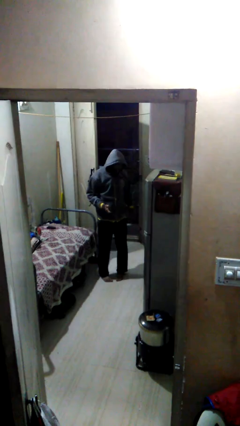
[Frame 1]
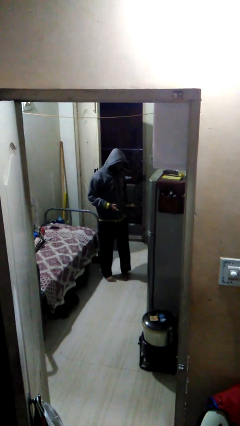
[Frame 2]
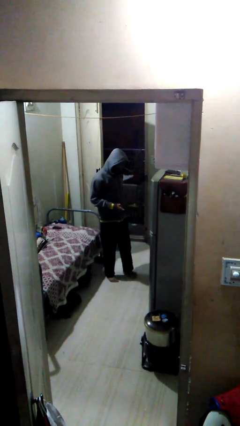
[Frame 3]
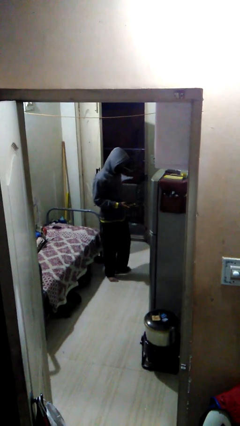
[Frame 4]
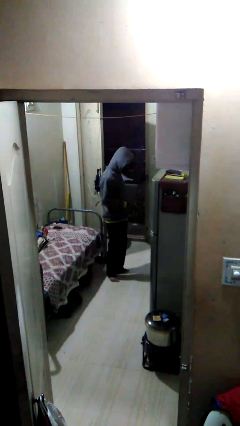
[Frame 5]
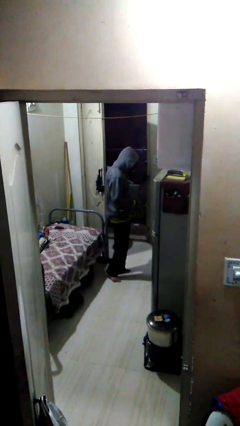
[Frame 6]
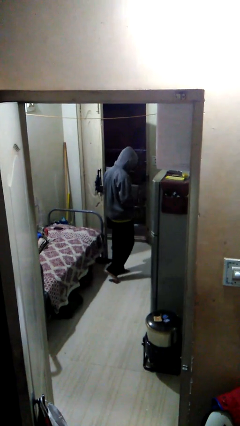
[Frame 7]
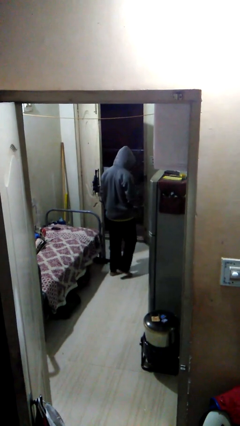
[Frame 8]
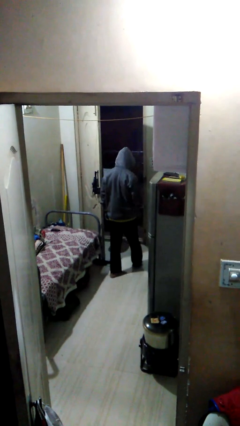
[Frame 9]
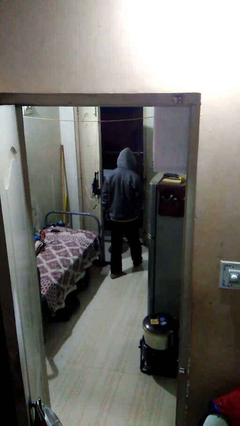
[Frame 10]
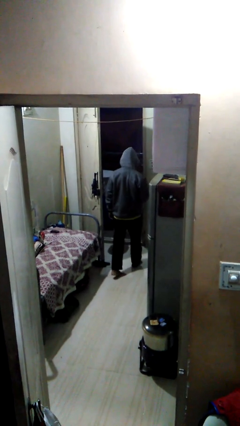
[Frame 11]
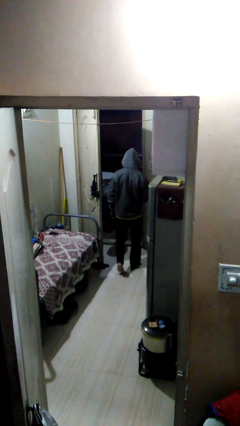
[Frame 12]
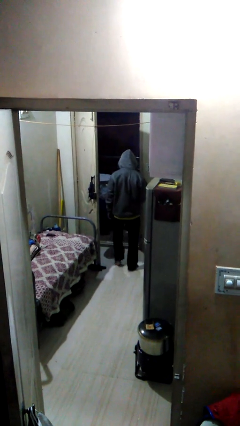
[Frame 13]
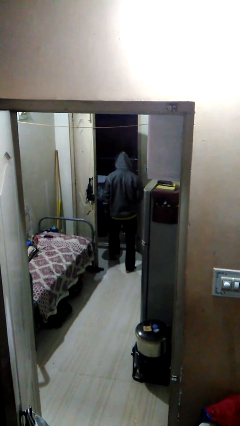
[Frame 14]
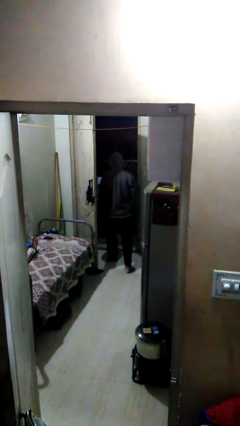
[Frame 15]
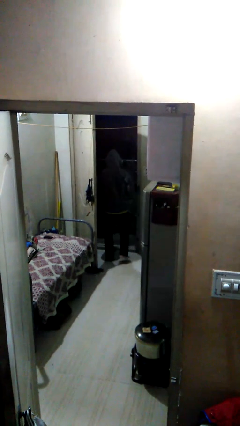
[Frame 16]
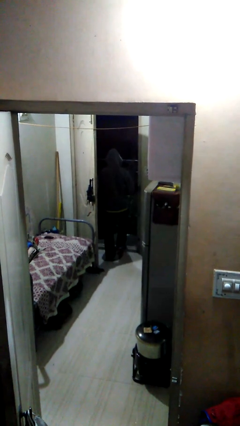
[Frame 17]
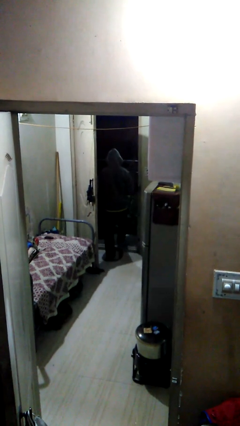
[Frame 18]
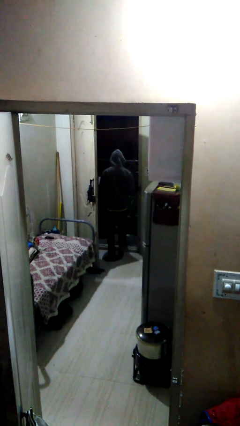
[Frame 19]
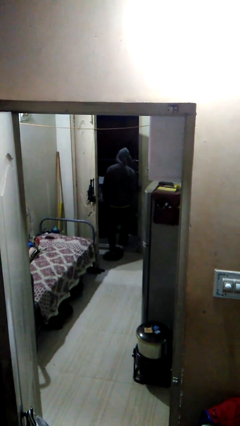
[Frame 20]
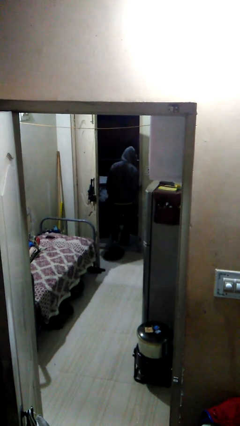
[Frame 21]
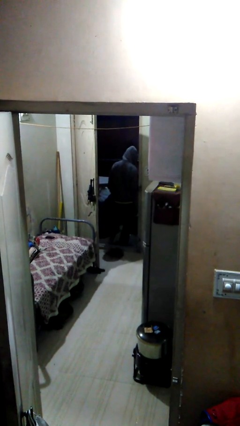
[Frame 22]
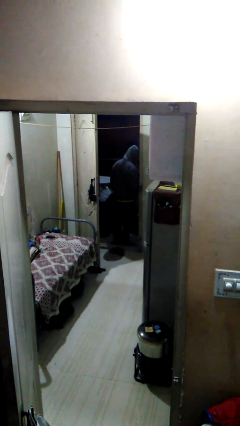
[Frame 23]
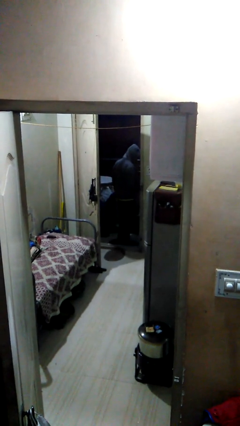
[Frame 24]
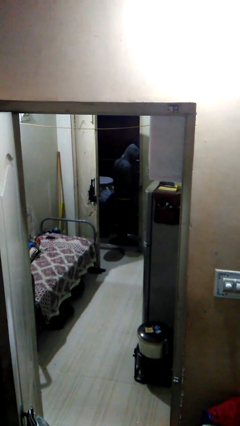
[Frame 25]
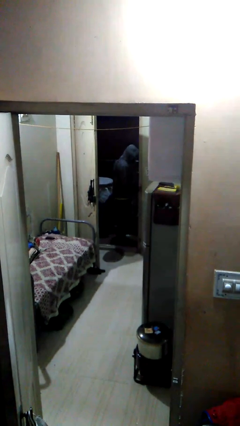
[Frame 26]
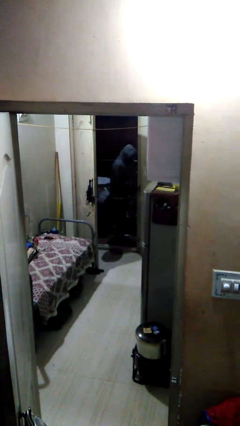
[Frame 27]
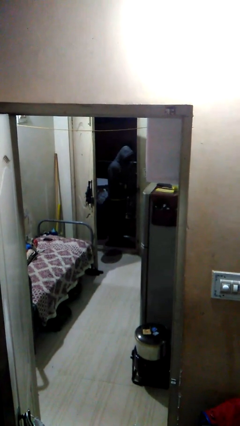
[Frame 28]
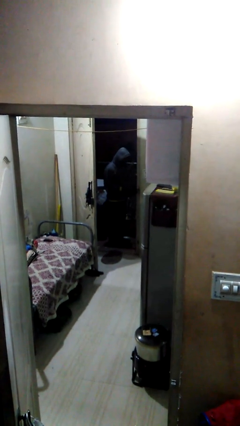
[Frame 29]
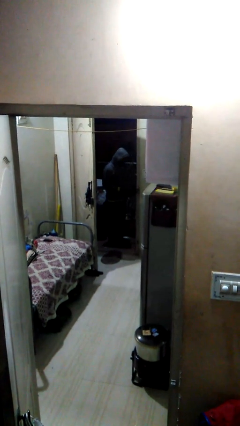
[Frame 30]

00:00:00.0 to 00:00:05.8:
person exits scene through structure

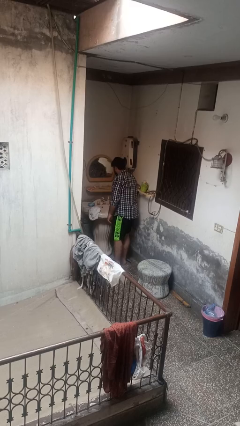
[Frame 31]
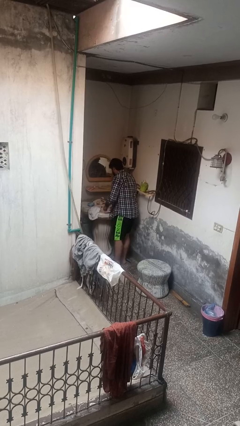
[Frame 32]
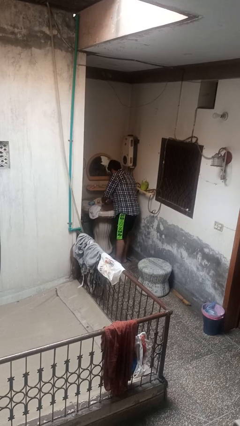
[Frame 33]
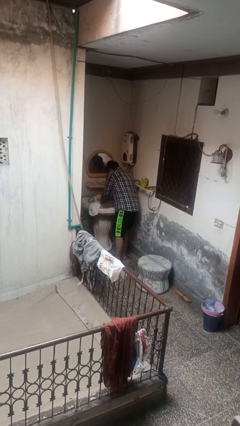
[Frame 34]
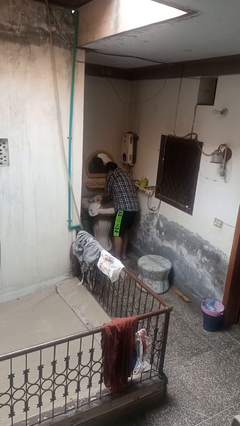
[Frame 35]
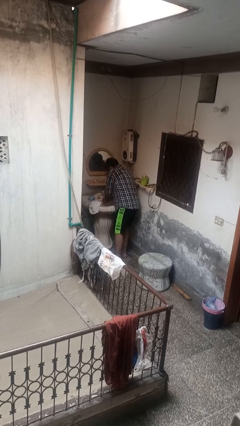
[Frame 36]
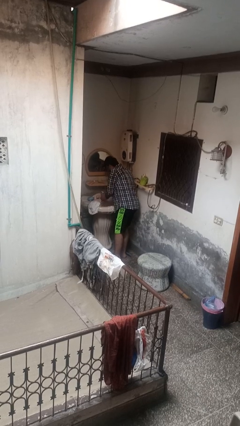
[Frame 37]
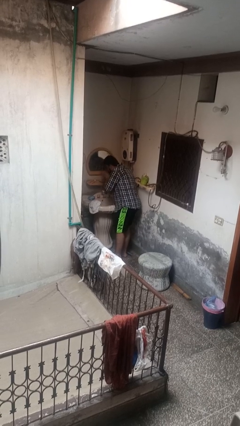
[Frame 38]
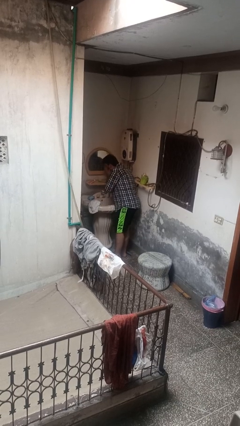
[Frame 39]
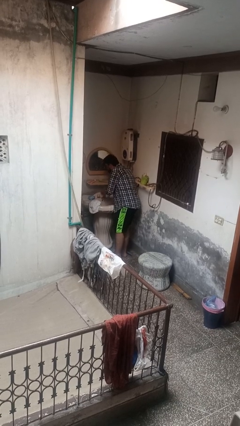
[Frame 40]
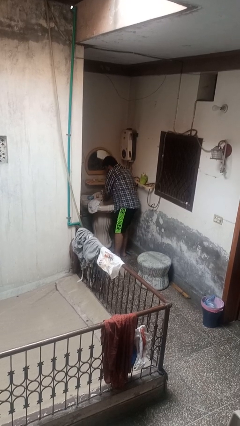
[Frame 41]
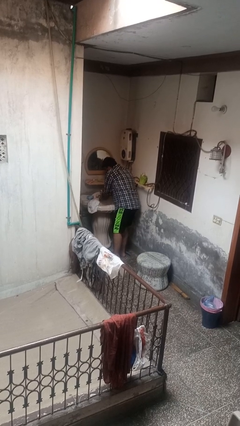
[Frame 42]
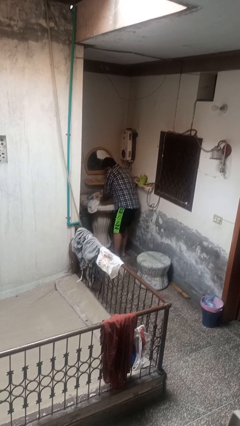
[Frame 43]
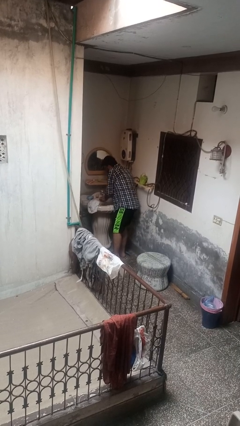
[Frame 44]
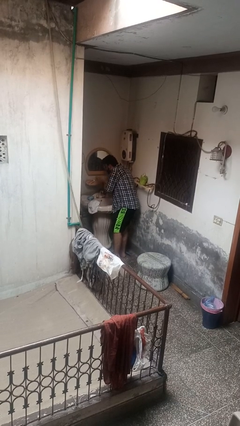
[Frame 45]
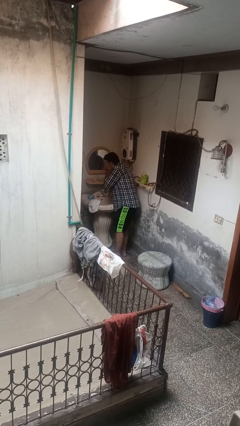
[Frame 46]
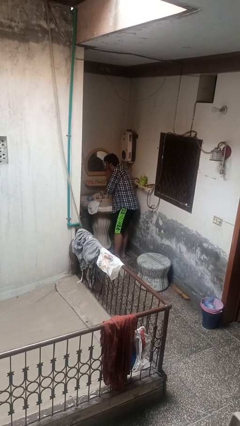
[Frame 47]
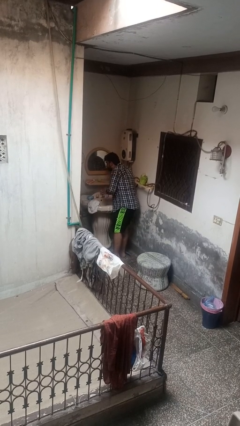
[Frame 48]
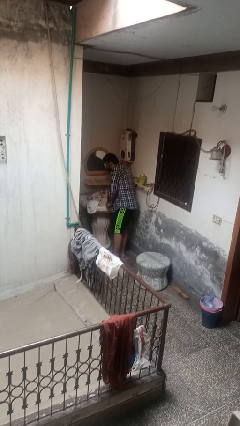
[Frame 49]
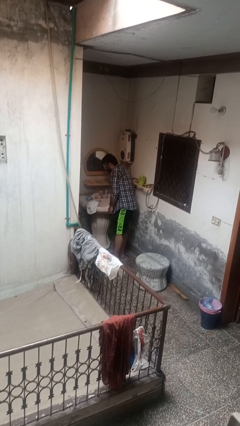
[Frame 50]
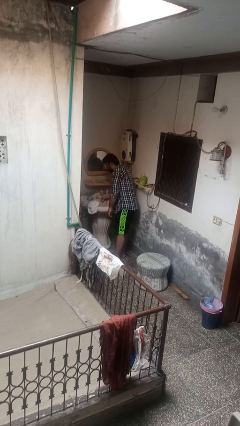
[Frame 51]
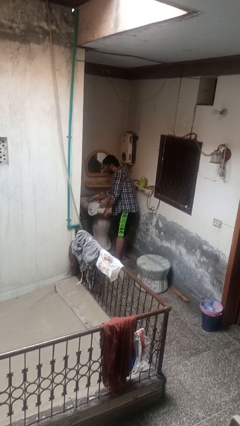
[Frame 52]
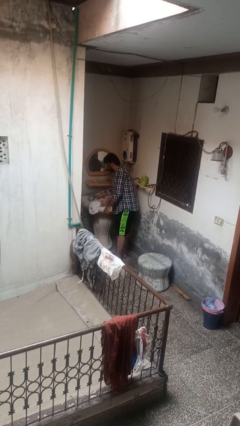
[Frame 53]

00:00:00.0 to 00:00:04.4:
person washes face

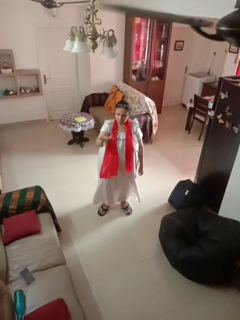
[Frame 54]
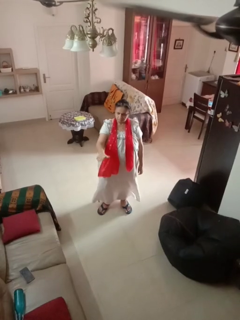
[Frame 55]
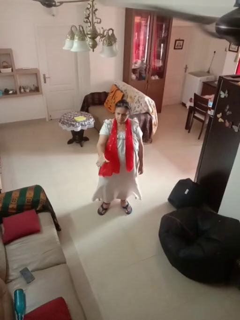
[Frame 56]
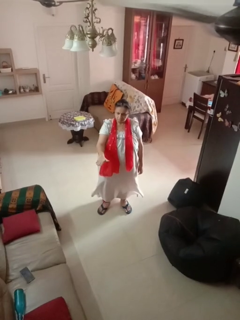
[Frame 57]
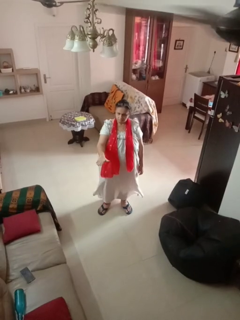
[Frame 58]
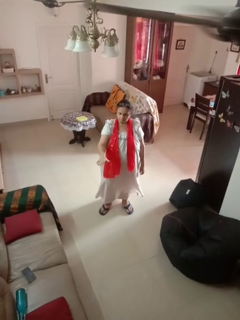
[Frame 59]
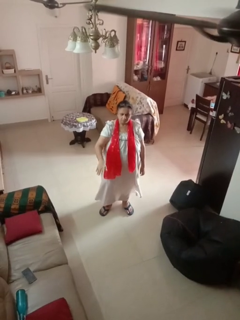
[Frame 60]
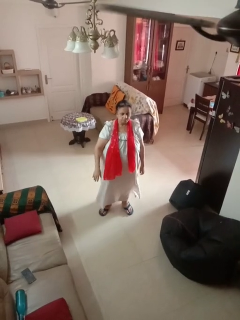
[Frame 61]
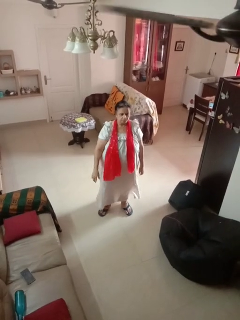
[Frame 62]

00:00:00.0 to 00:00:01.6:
person gestures swipe down

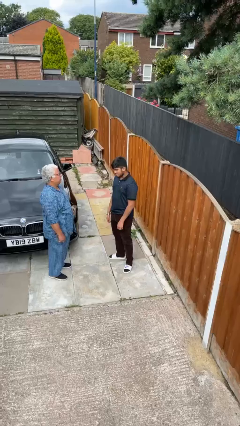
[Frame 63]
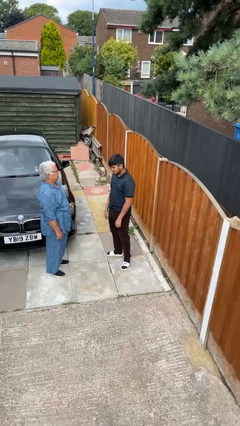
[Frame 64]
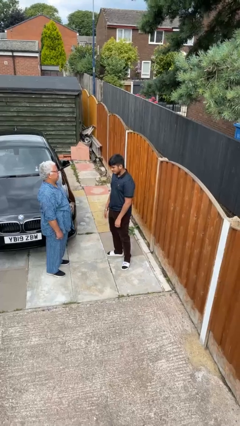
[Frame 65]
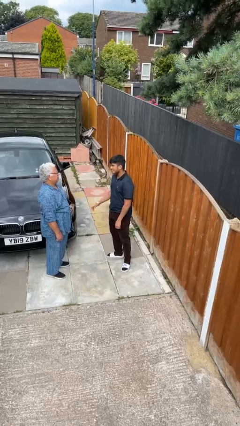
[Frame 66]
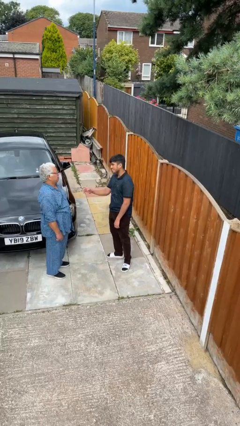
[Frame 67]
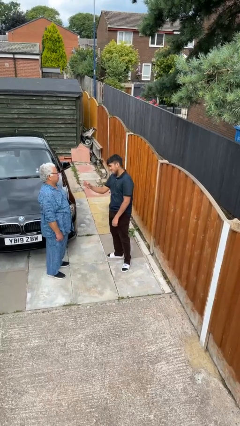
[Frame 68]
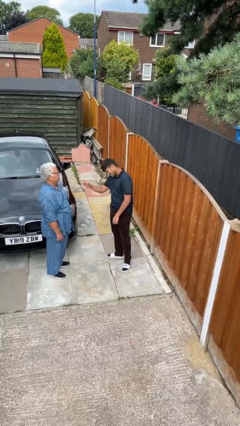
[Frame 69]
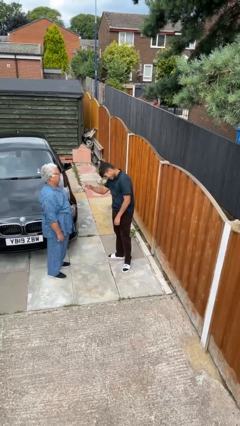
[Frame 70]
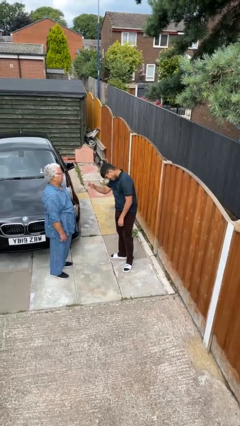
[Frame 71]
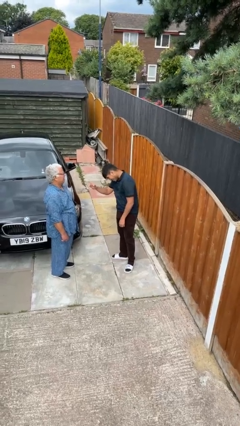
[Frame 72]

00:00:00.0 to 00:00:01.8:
person laughs with person

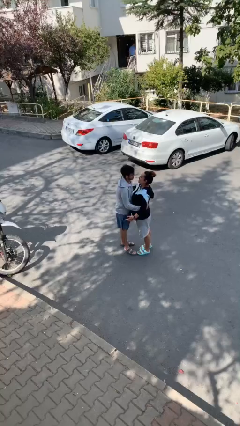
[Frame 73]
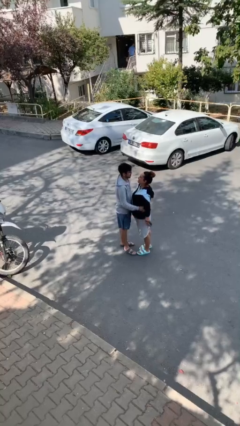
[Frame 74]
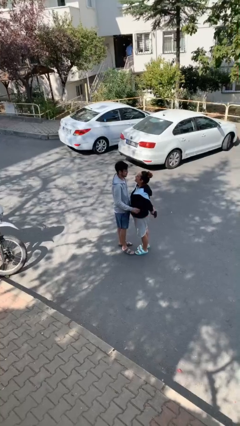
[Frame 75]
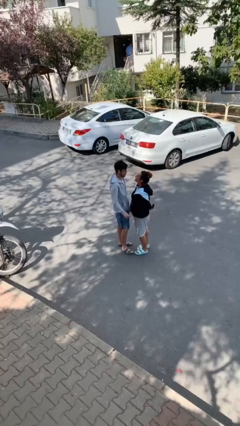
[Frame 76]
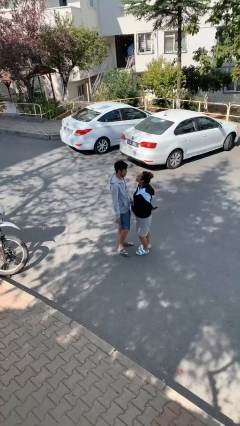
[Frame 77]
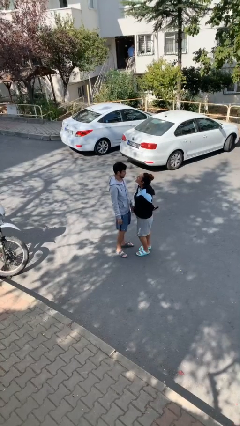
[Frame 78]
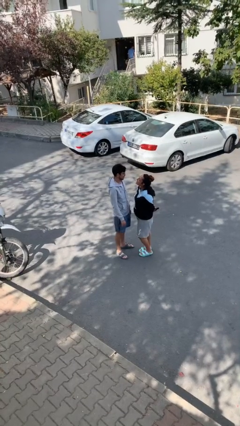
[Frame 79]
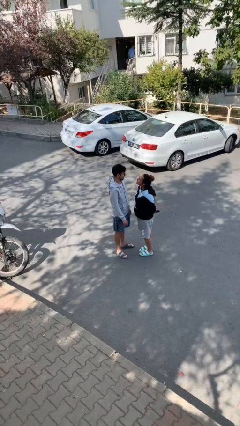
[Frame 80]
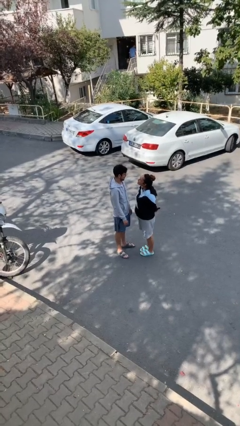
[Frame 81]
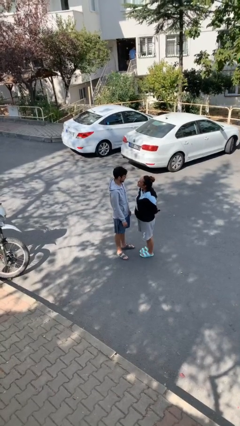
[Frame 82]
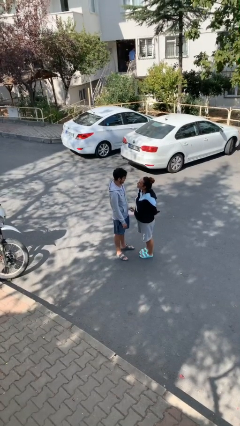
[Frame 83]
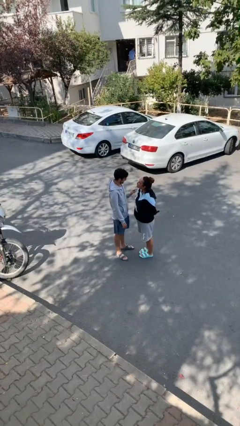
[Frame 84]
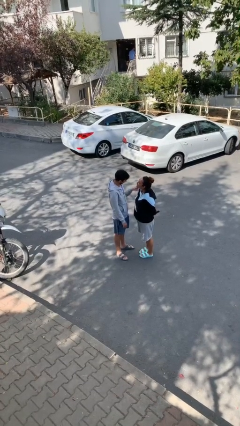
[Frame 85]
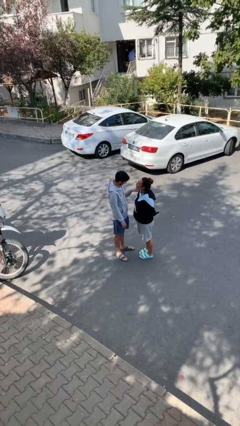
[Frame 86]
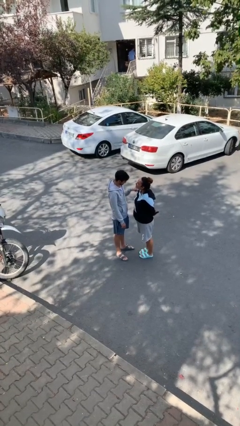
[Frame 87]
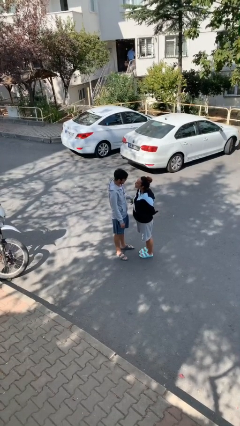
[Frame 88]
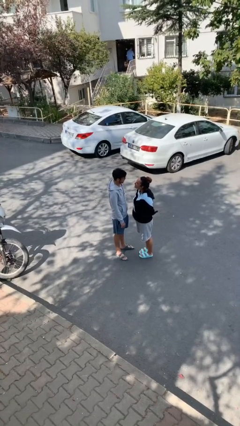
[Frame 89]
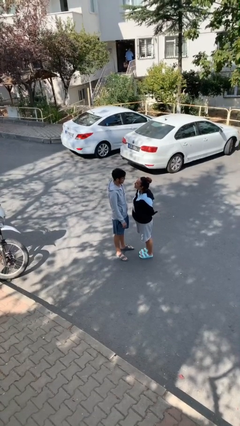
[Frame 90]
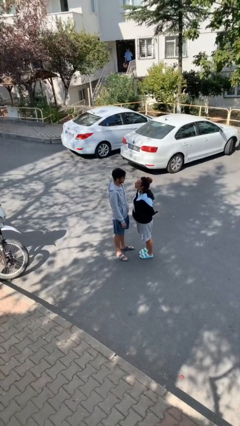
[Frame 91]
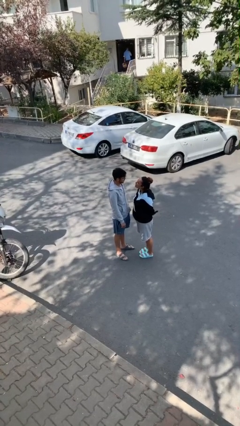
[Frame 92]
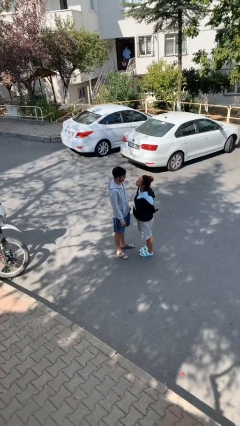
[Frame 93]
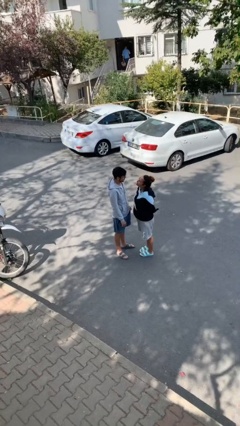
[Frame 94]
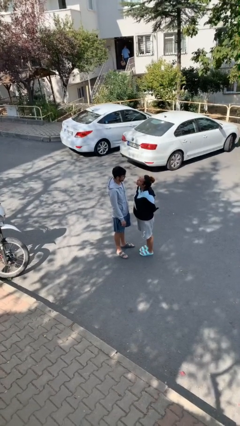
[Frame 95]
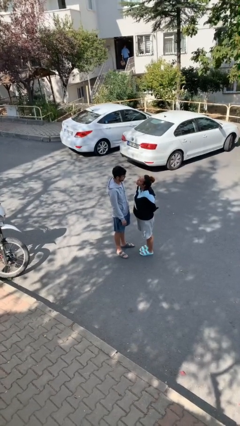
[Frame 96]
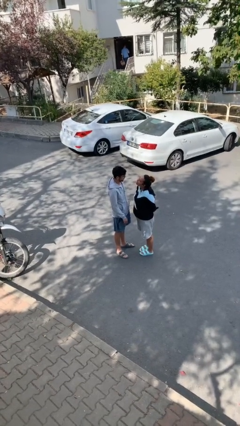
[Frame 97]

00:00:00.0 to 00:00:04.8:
person talks to person
